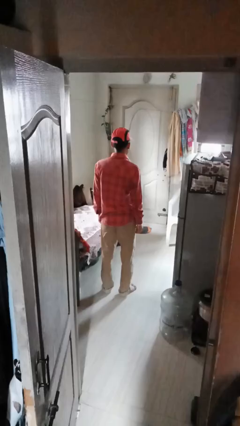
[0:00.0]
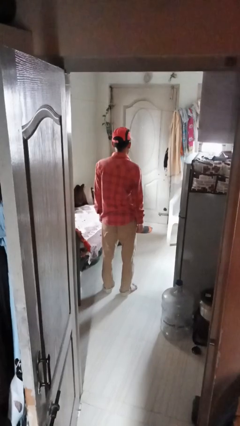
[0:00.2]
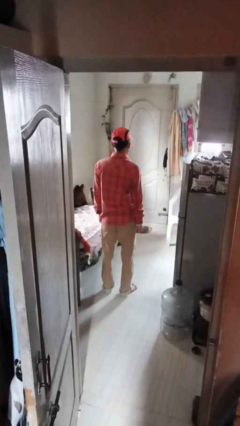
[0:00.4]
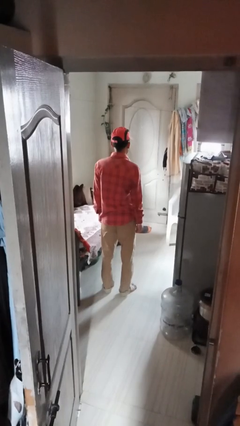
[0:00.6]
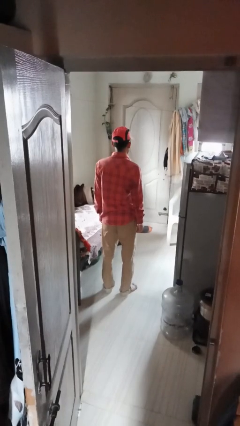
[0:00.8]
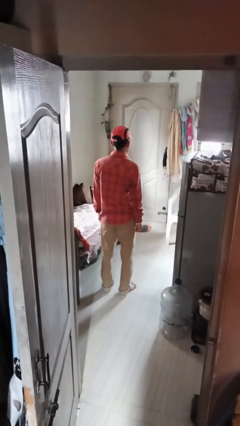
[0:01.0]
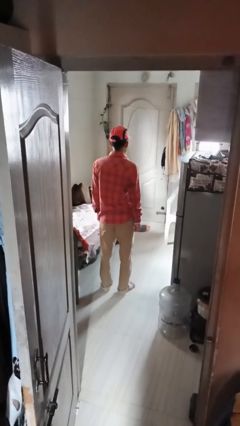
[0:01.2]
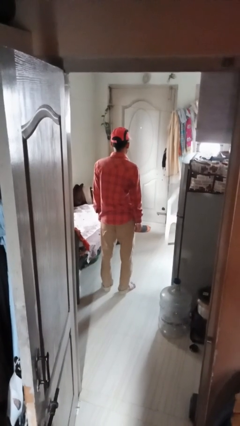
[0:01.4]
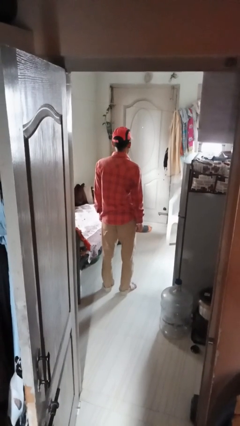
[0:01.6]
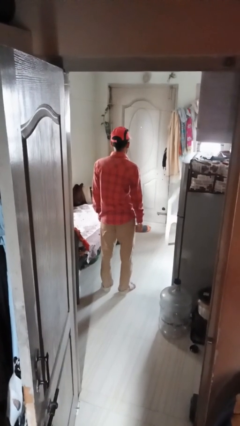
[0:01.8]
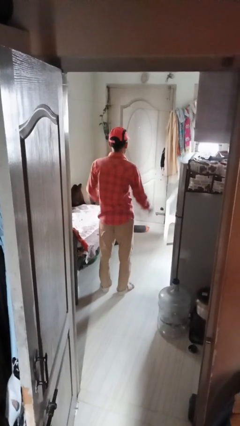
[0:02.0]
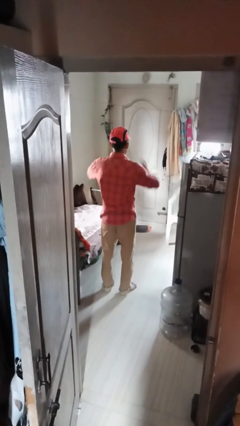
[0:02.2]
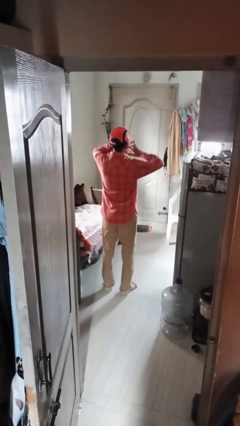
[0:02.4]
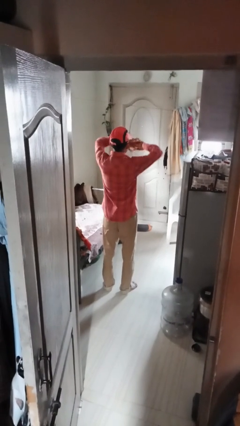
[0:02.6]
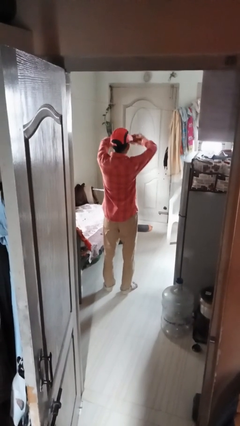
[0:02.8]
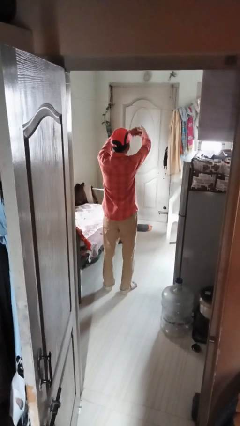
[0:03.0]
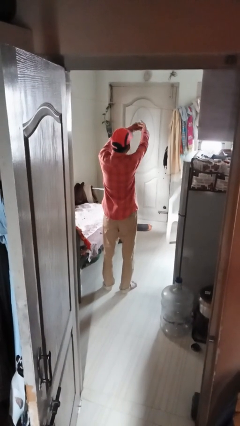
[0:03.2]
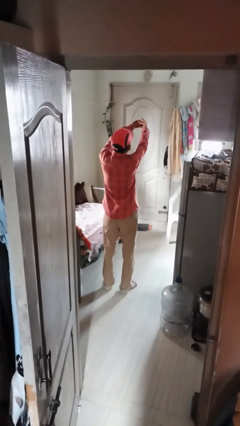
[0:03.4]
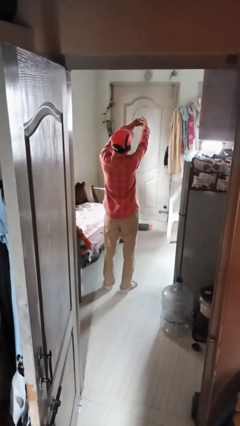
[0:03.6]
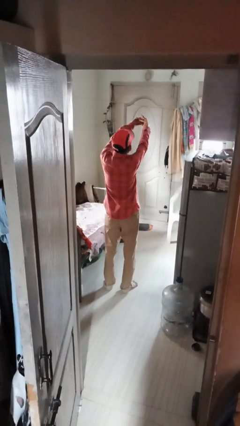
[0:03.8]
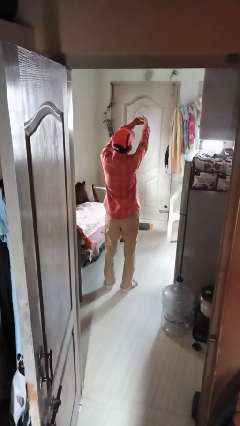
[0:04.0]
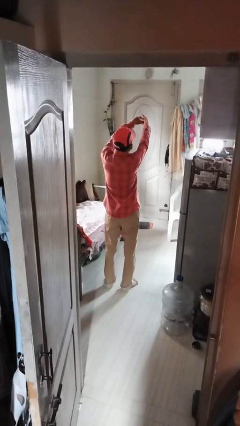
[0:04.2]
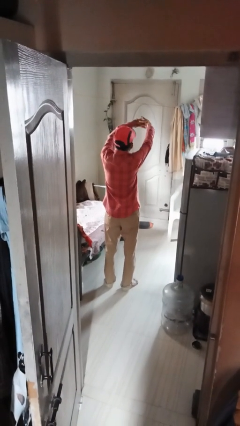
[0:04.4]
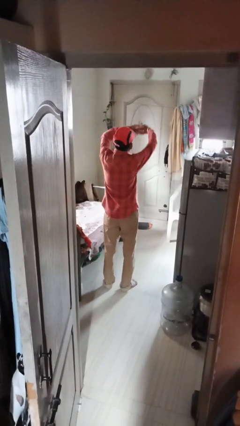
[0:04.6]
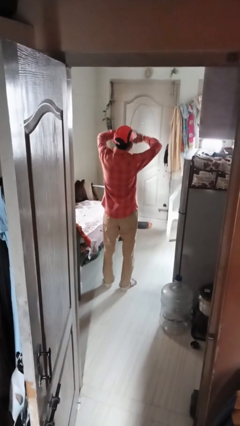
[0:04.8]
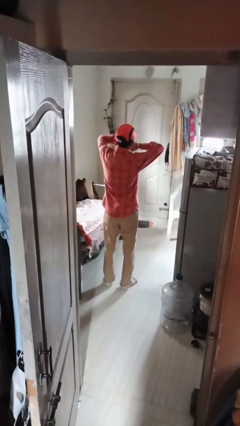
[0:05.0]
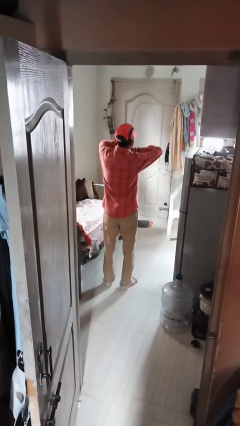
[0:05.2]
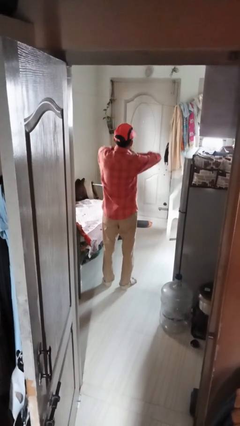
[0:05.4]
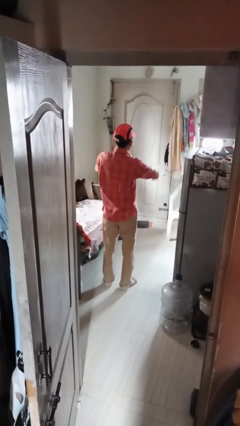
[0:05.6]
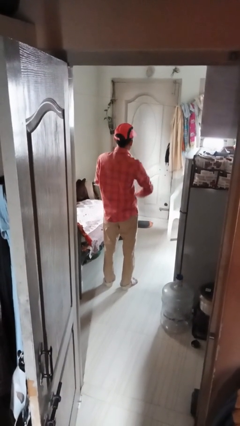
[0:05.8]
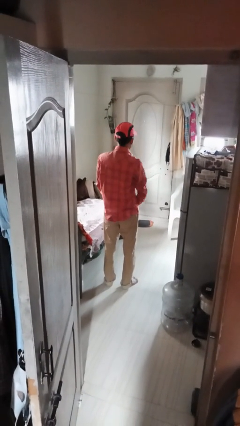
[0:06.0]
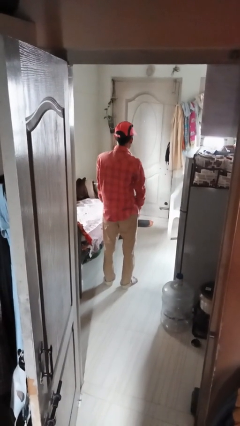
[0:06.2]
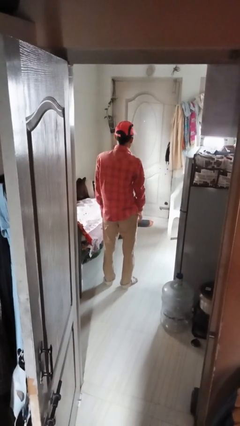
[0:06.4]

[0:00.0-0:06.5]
person cracks knuckles

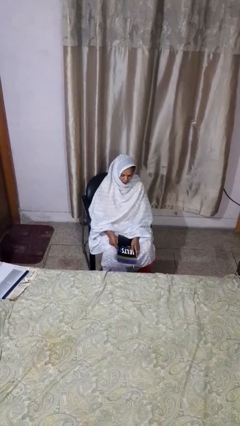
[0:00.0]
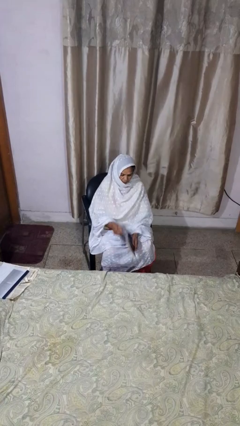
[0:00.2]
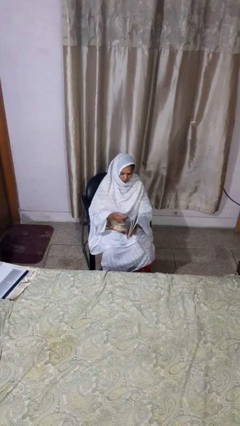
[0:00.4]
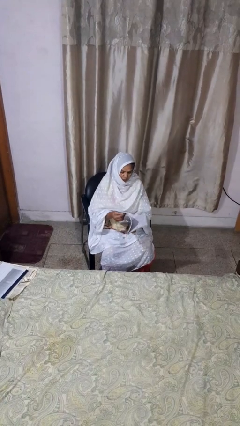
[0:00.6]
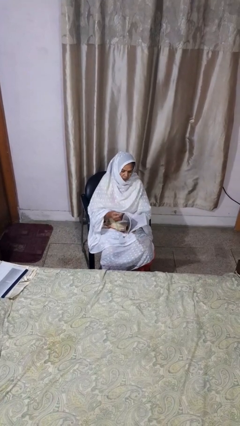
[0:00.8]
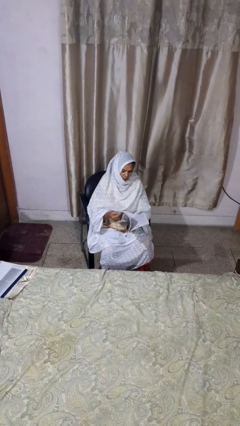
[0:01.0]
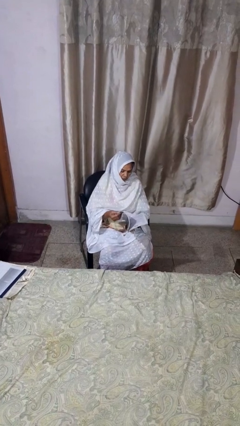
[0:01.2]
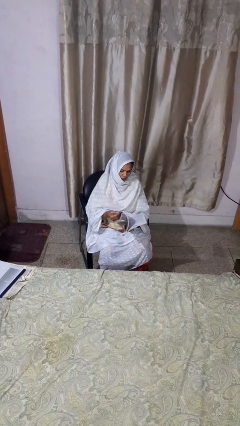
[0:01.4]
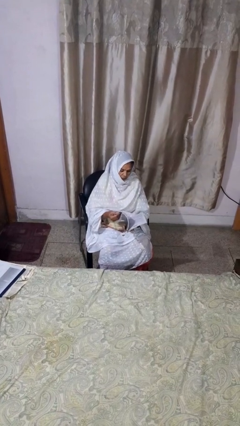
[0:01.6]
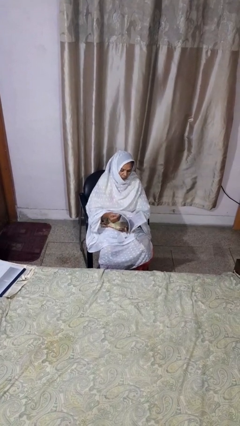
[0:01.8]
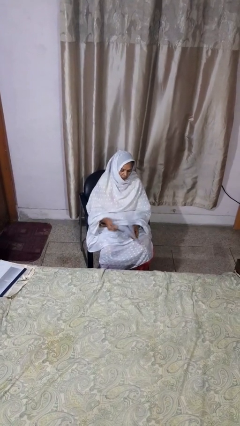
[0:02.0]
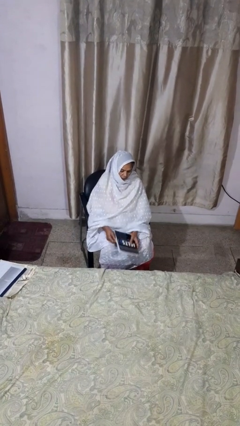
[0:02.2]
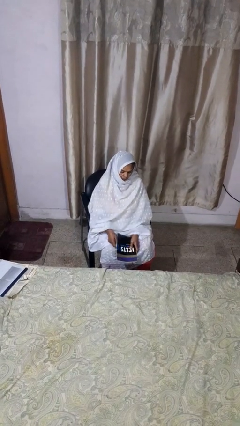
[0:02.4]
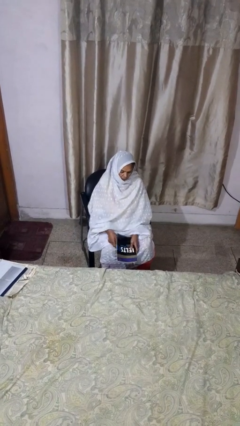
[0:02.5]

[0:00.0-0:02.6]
person reads book

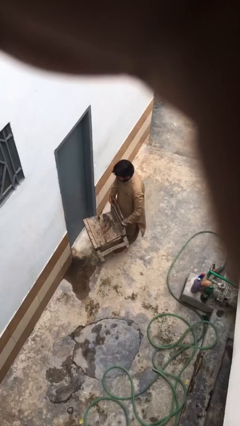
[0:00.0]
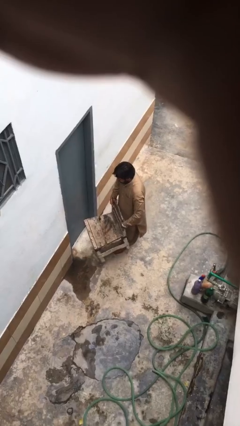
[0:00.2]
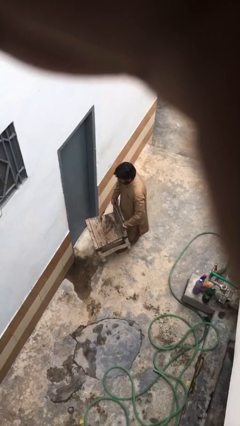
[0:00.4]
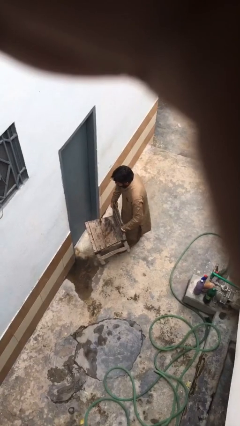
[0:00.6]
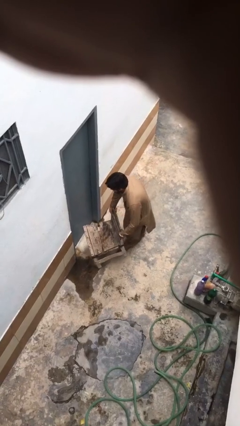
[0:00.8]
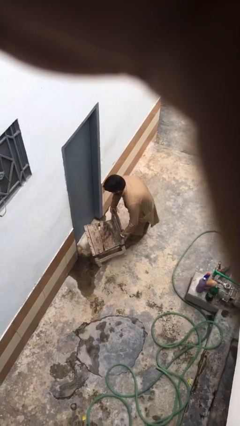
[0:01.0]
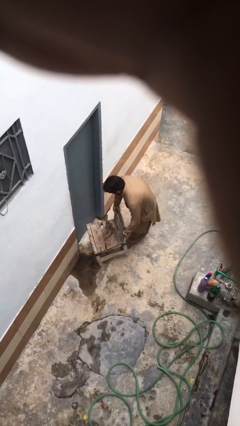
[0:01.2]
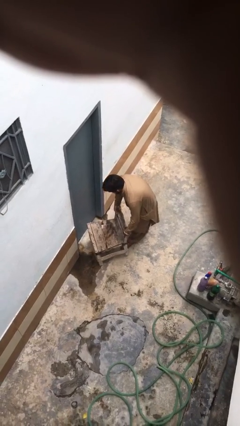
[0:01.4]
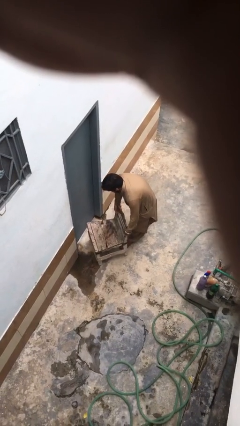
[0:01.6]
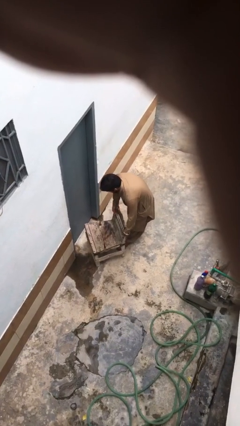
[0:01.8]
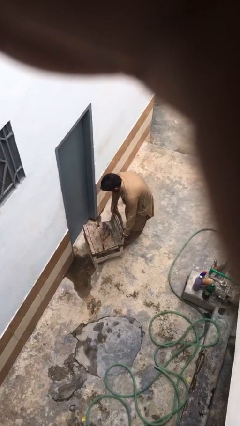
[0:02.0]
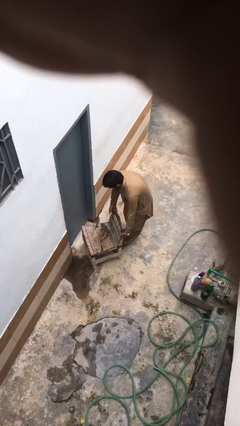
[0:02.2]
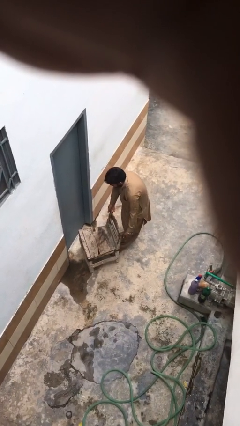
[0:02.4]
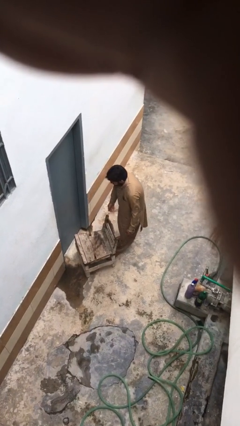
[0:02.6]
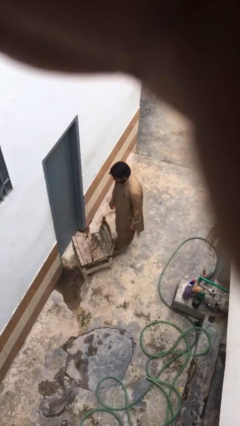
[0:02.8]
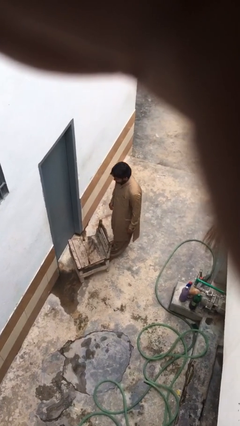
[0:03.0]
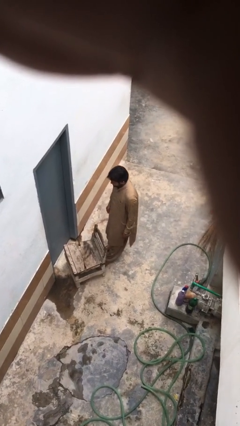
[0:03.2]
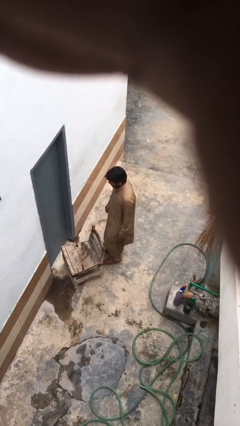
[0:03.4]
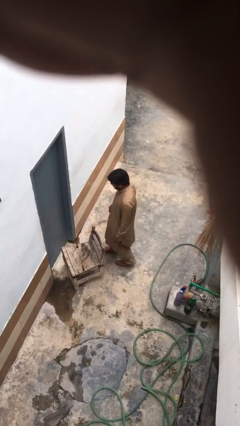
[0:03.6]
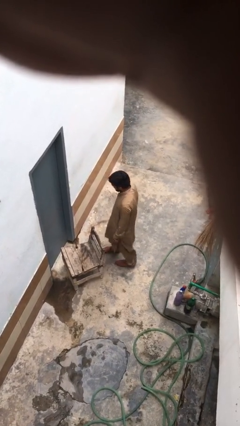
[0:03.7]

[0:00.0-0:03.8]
person puts down object on floor

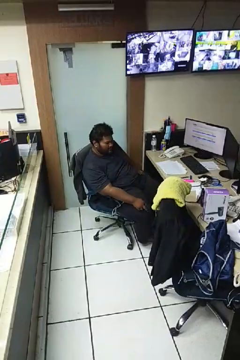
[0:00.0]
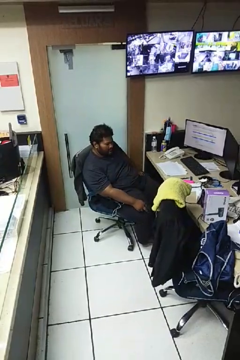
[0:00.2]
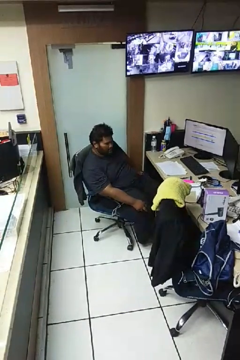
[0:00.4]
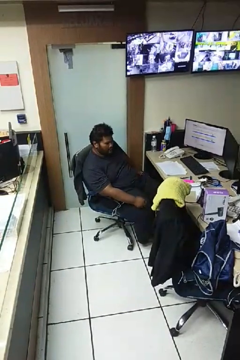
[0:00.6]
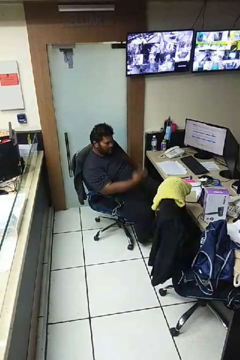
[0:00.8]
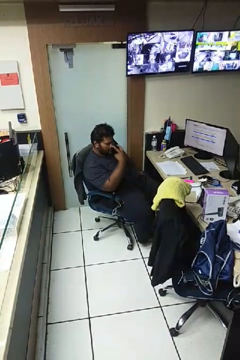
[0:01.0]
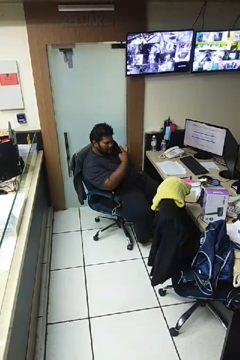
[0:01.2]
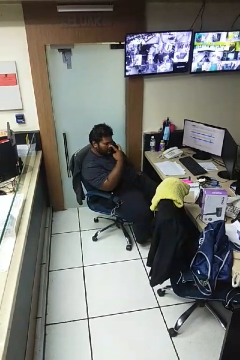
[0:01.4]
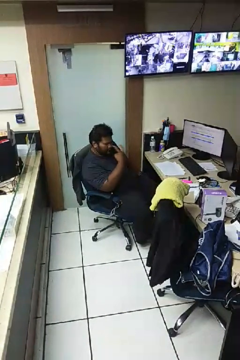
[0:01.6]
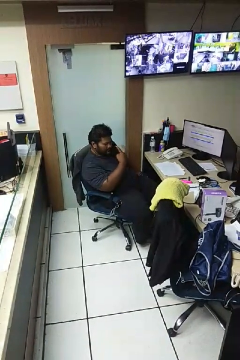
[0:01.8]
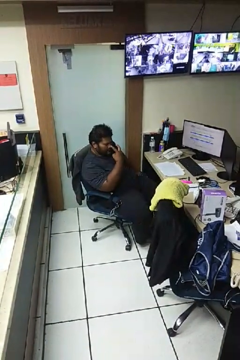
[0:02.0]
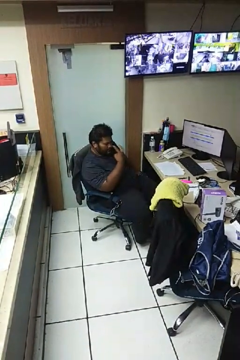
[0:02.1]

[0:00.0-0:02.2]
person gestures watch closely

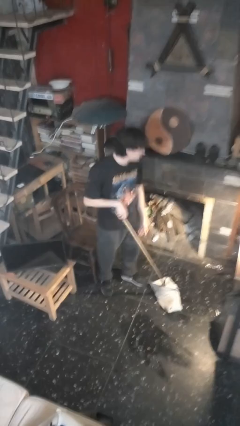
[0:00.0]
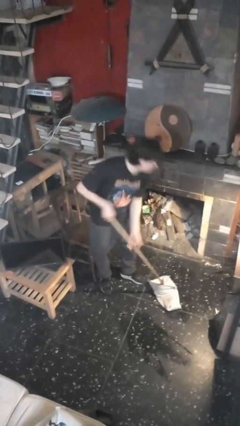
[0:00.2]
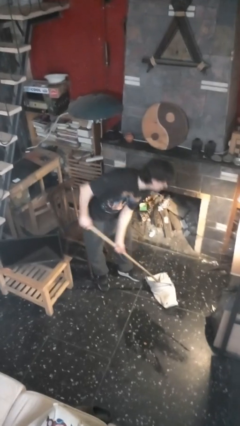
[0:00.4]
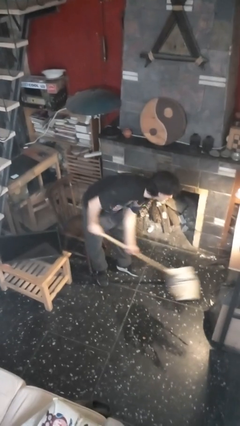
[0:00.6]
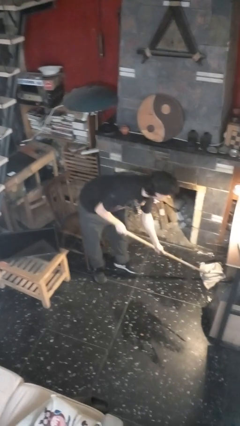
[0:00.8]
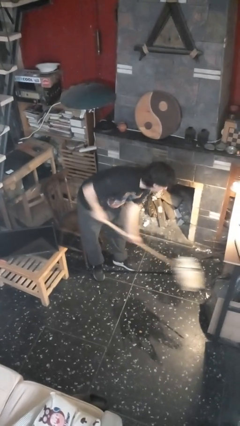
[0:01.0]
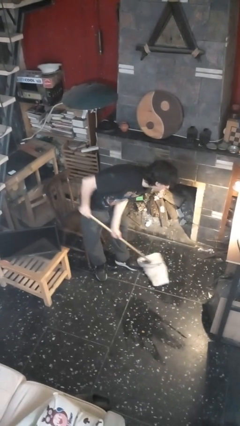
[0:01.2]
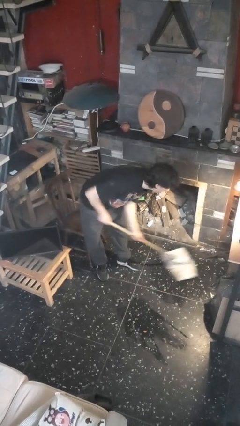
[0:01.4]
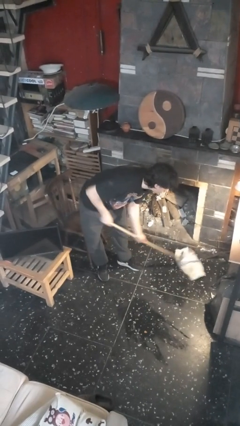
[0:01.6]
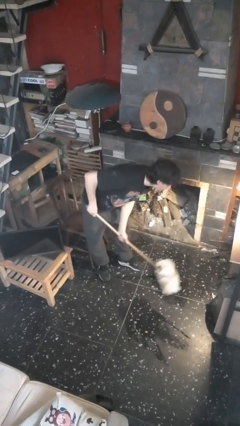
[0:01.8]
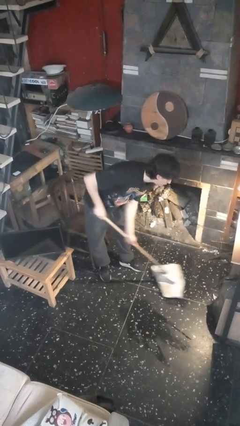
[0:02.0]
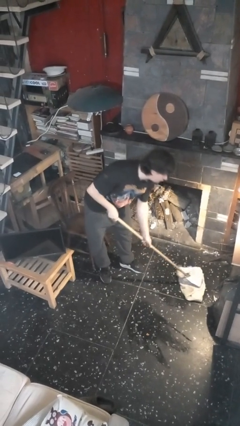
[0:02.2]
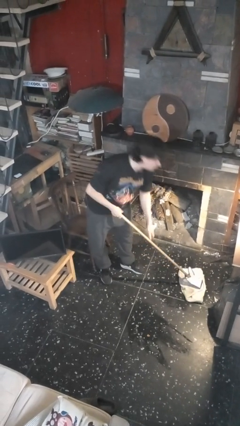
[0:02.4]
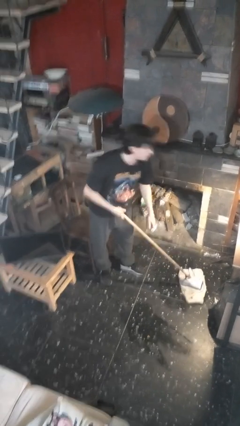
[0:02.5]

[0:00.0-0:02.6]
person mops
